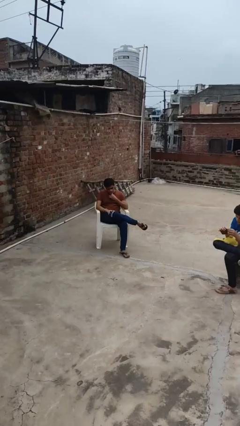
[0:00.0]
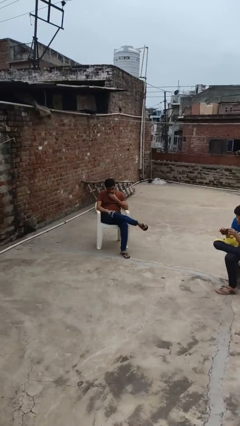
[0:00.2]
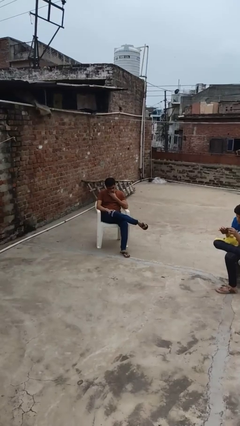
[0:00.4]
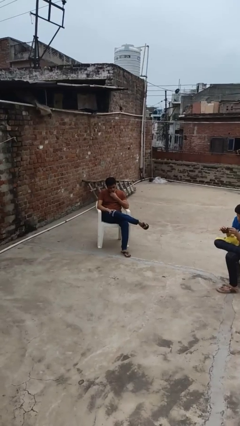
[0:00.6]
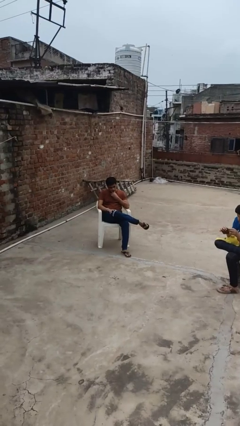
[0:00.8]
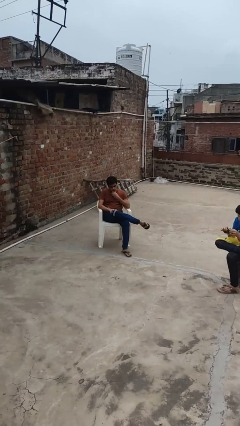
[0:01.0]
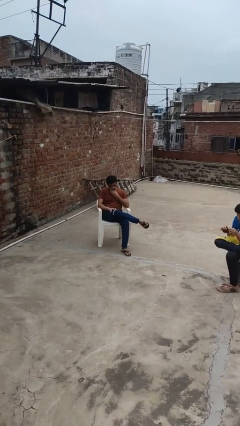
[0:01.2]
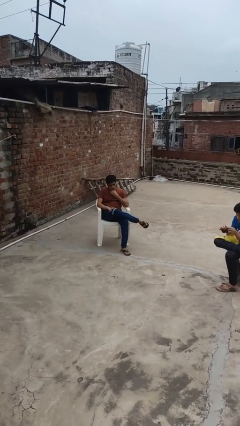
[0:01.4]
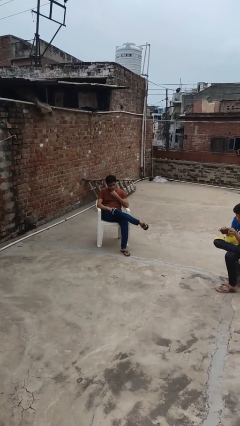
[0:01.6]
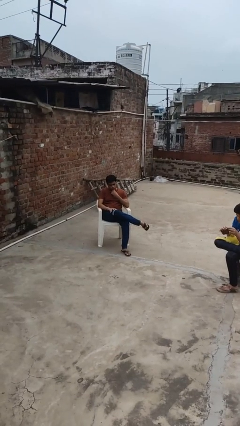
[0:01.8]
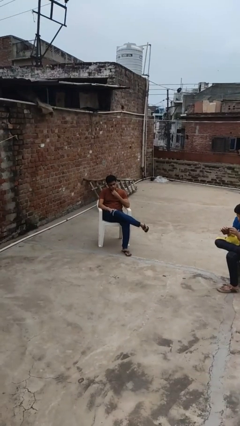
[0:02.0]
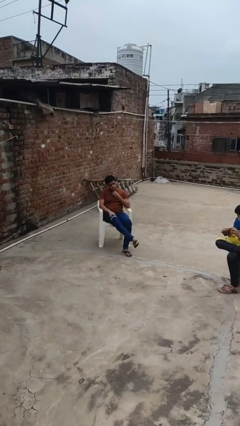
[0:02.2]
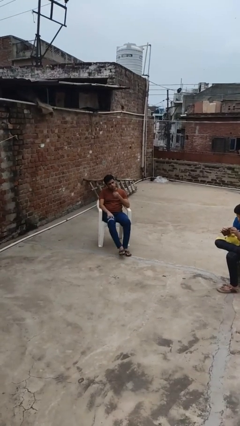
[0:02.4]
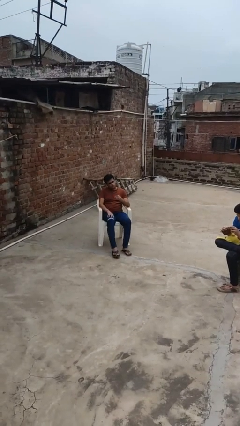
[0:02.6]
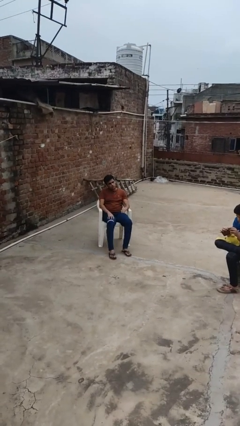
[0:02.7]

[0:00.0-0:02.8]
person strokes chin

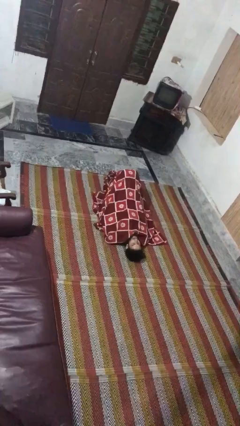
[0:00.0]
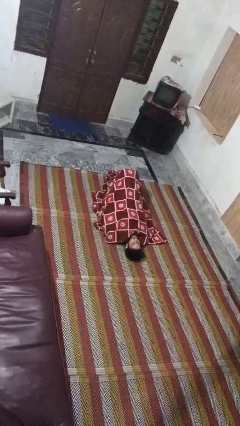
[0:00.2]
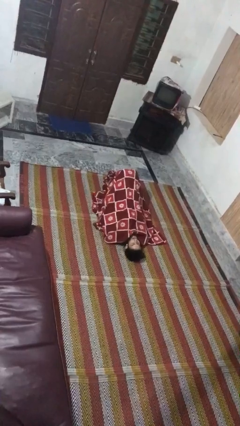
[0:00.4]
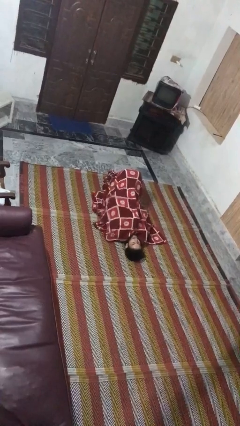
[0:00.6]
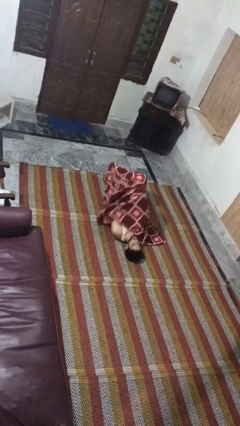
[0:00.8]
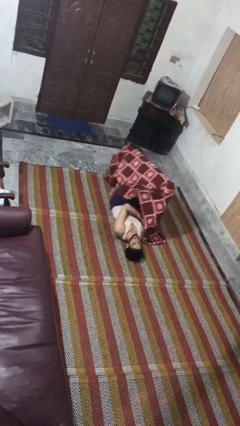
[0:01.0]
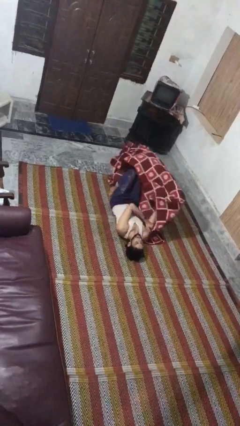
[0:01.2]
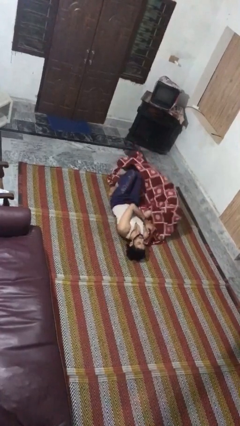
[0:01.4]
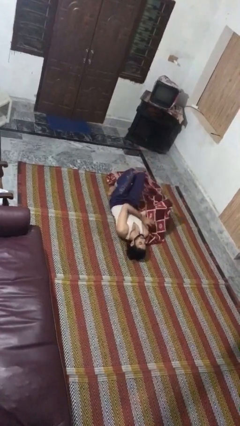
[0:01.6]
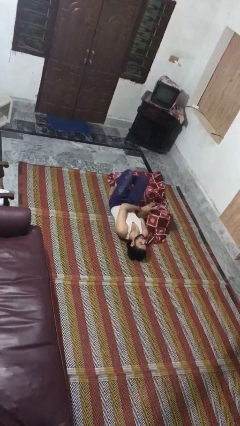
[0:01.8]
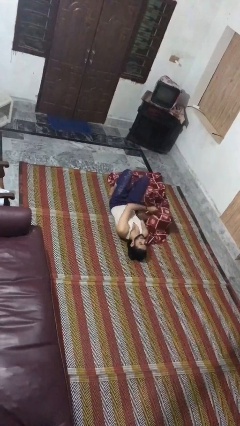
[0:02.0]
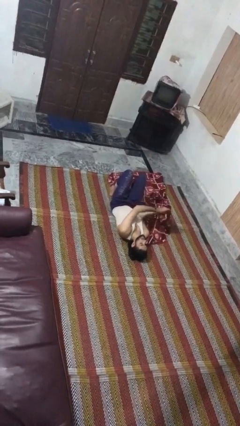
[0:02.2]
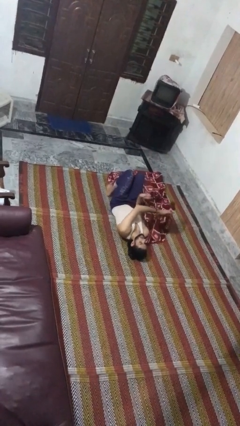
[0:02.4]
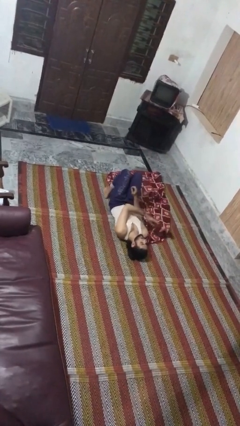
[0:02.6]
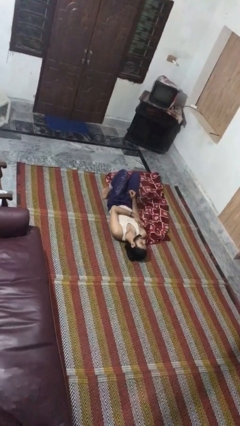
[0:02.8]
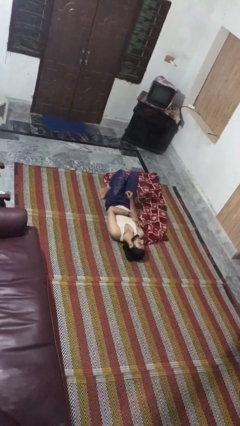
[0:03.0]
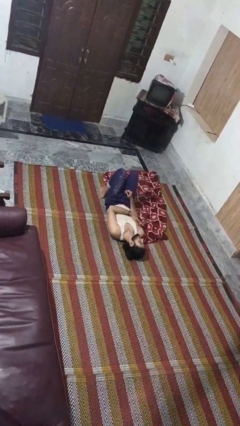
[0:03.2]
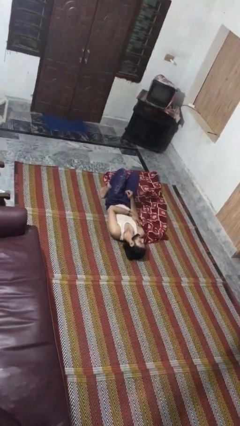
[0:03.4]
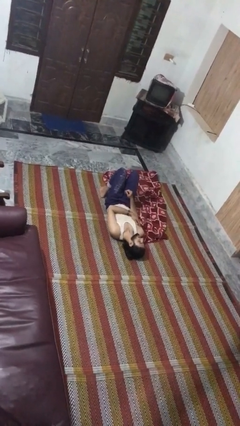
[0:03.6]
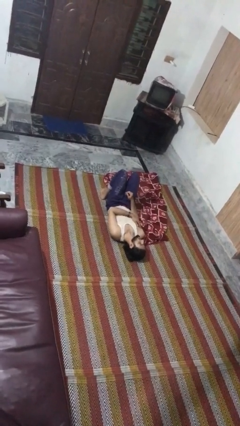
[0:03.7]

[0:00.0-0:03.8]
person uncovers with blanket

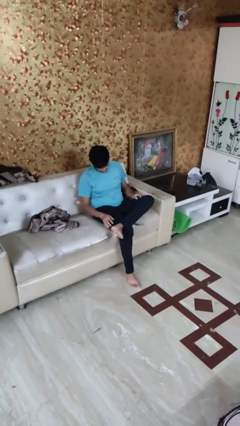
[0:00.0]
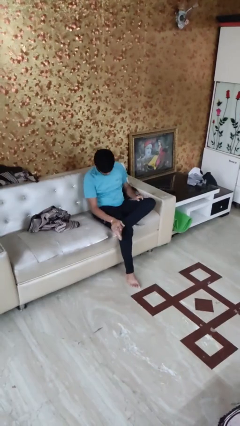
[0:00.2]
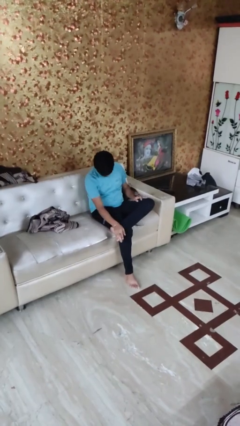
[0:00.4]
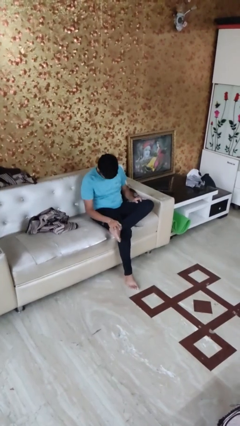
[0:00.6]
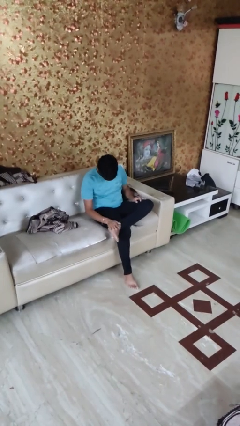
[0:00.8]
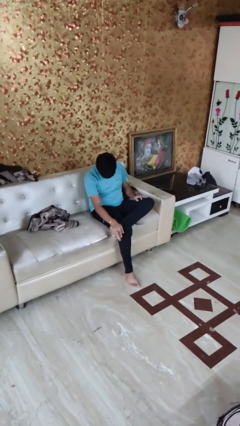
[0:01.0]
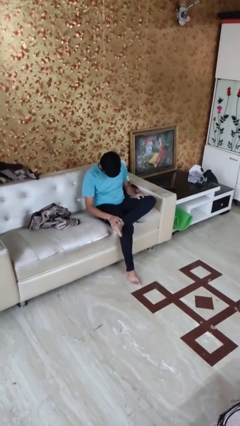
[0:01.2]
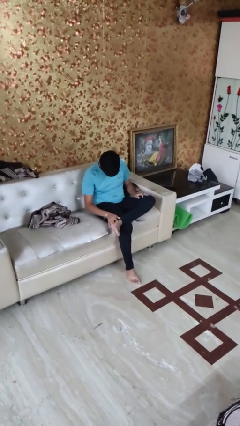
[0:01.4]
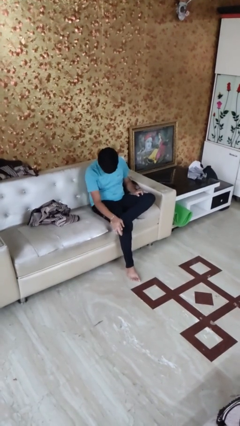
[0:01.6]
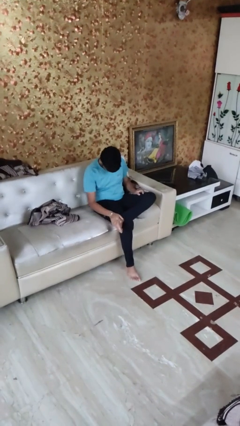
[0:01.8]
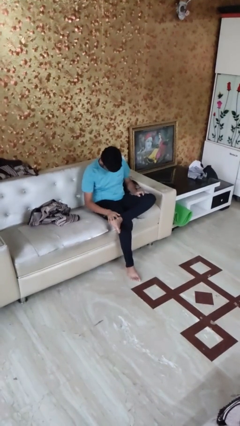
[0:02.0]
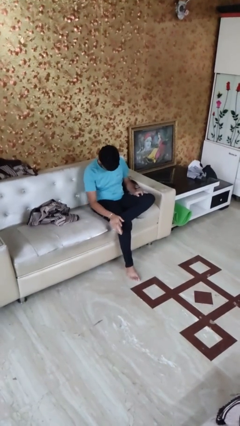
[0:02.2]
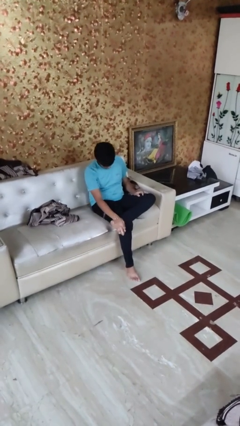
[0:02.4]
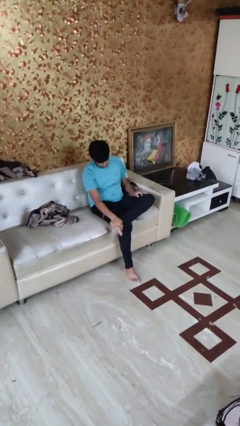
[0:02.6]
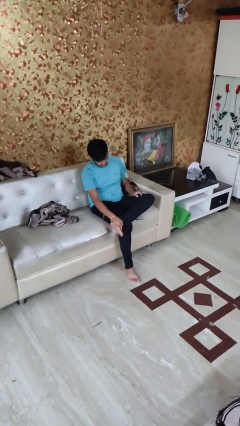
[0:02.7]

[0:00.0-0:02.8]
person rubs foot

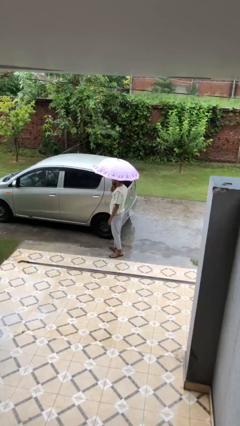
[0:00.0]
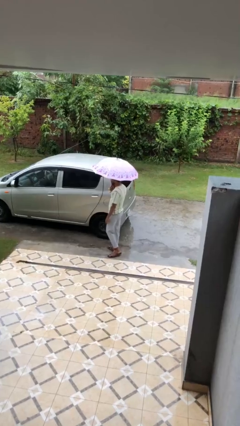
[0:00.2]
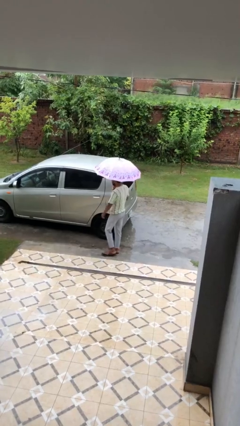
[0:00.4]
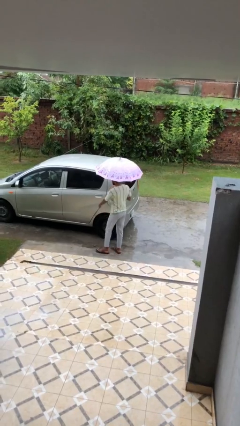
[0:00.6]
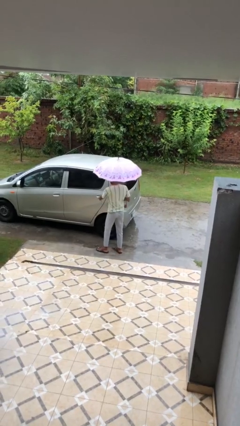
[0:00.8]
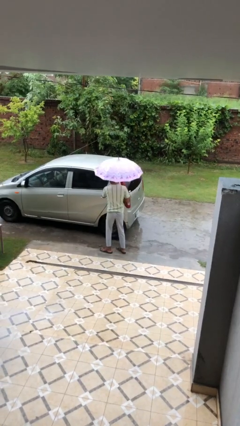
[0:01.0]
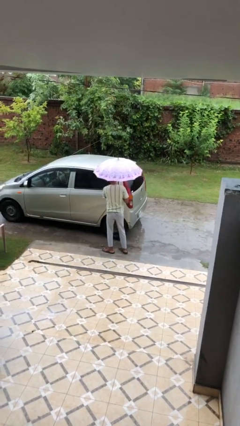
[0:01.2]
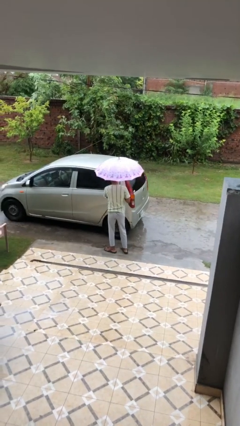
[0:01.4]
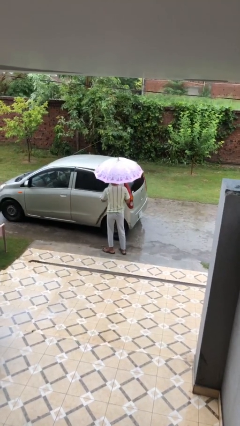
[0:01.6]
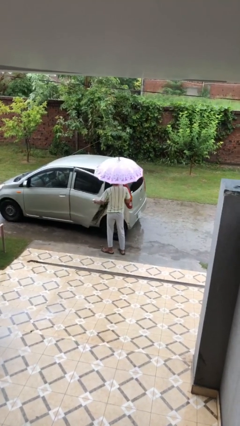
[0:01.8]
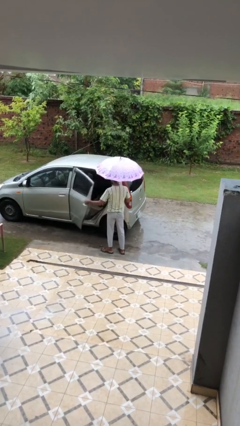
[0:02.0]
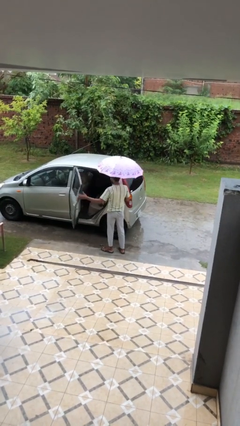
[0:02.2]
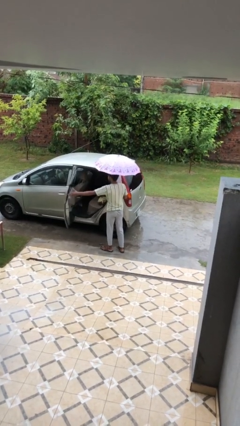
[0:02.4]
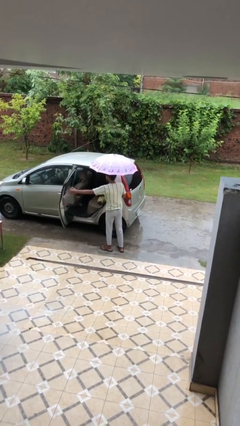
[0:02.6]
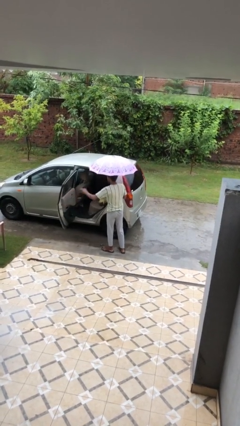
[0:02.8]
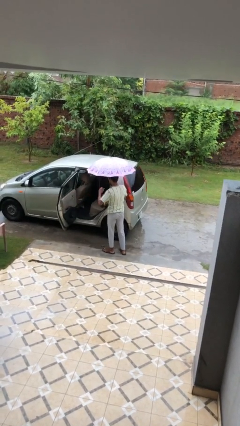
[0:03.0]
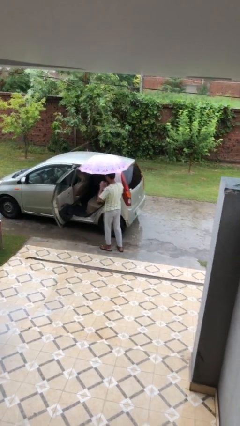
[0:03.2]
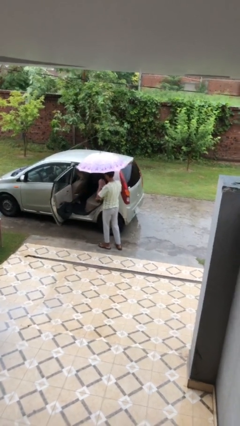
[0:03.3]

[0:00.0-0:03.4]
person opens car door

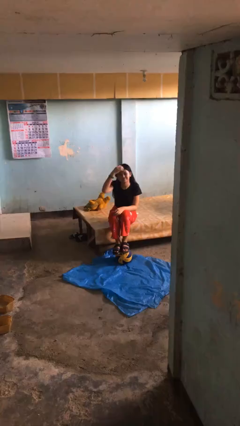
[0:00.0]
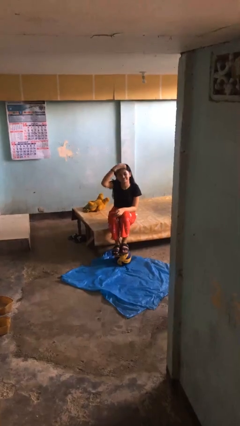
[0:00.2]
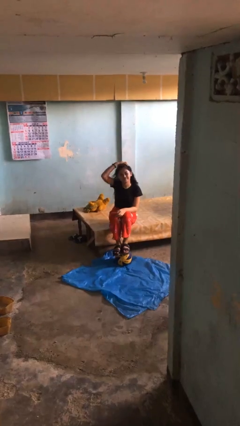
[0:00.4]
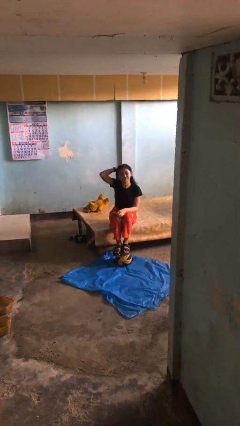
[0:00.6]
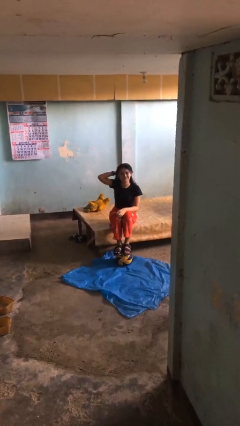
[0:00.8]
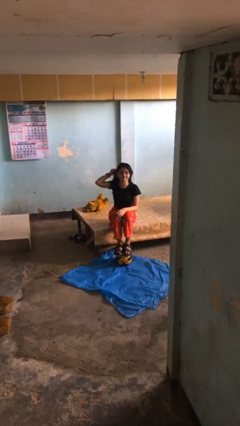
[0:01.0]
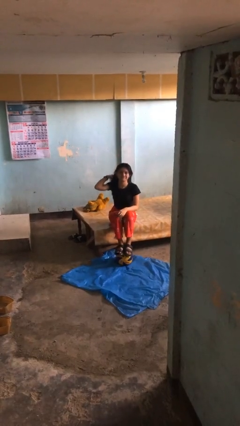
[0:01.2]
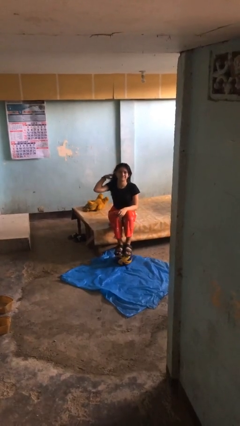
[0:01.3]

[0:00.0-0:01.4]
person strokes hair

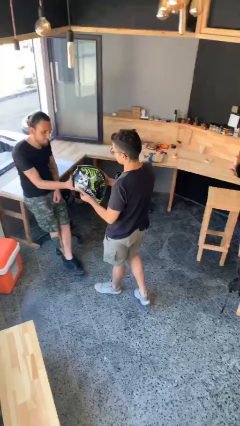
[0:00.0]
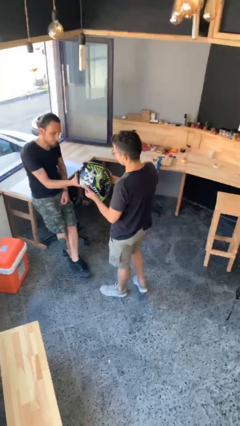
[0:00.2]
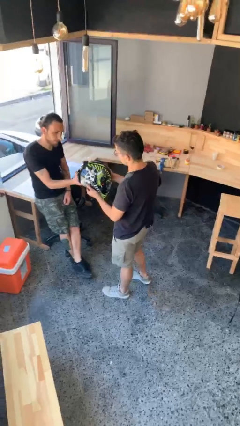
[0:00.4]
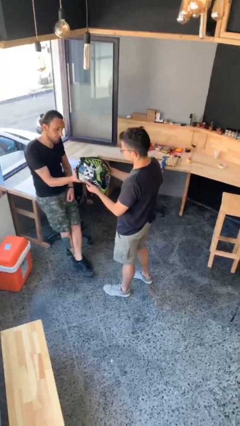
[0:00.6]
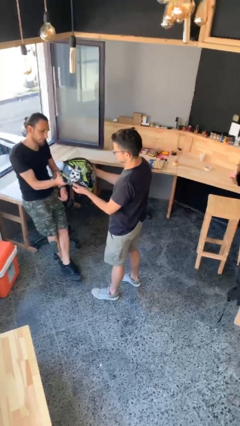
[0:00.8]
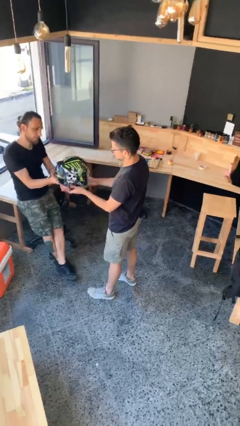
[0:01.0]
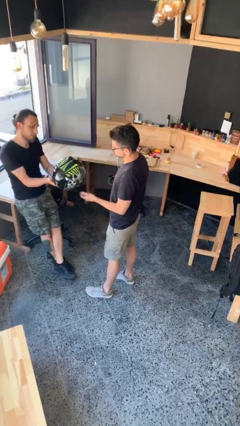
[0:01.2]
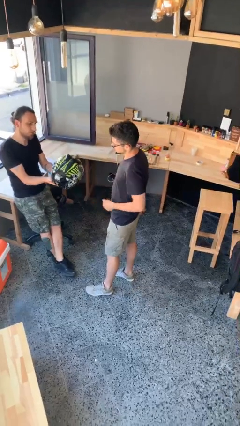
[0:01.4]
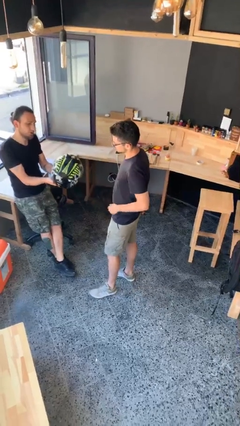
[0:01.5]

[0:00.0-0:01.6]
person transfers object to person

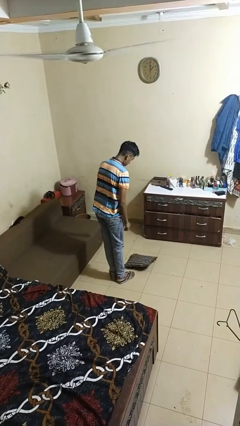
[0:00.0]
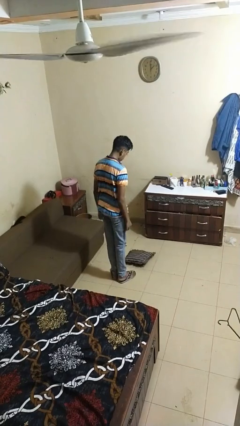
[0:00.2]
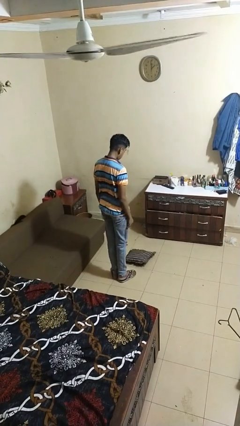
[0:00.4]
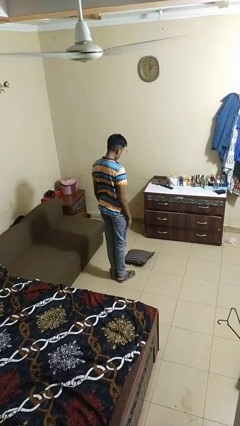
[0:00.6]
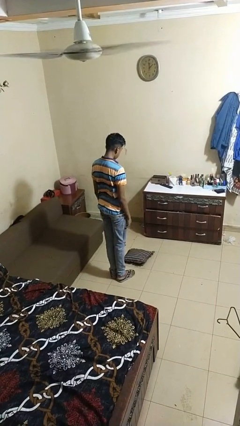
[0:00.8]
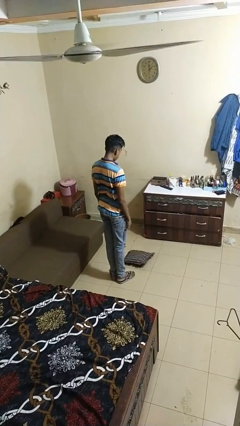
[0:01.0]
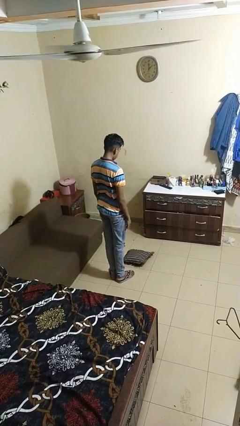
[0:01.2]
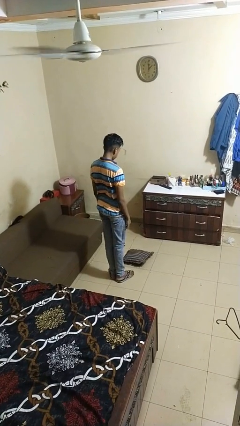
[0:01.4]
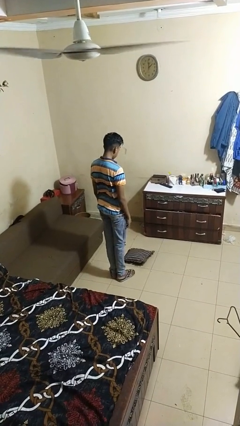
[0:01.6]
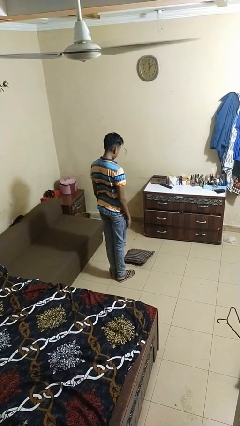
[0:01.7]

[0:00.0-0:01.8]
person drops object
